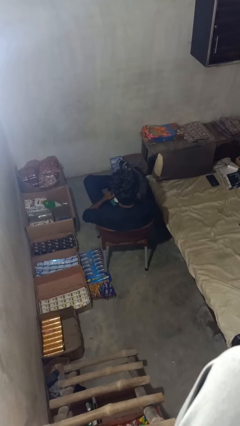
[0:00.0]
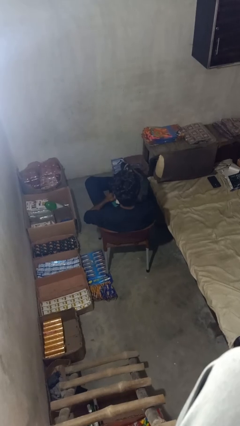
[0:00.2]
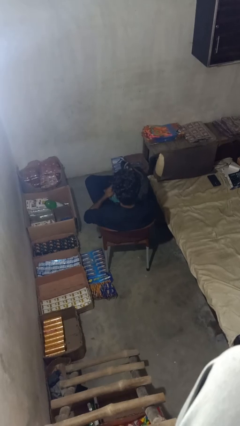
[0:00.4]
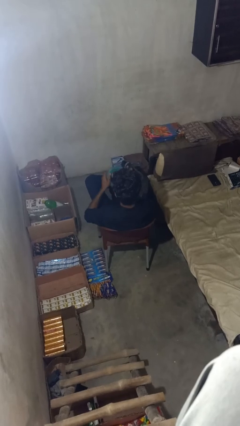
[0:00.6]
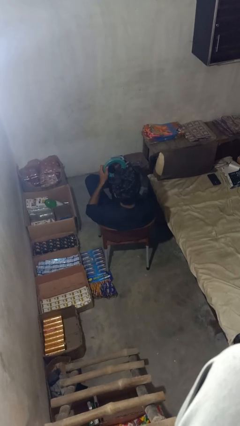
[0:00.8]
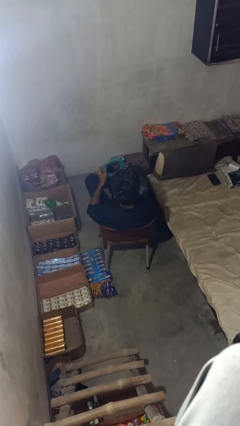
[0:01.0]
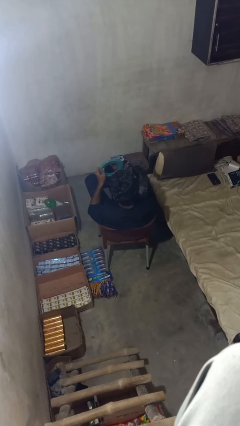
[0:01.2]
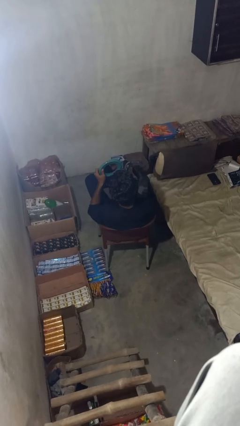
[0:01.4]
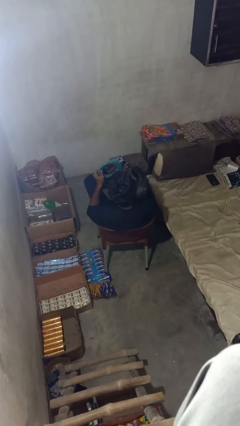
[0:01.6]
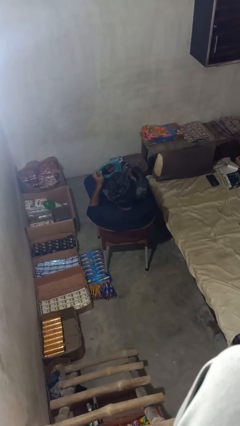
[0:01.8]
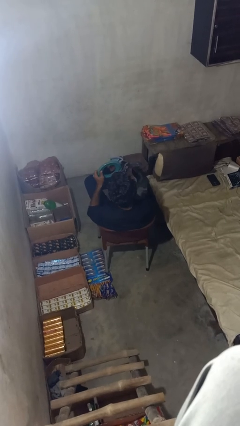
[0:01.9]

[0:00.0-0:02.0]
person applies lip makeup

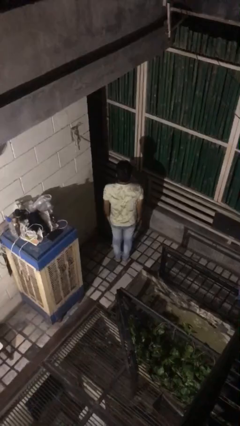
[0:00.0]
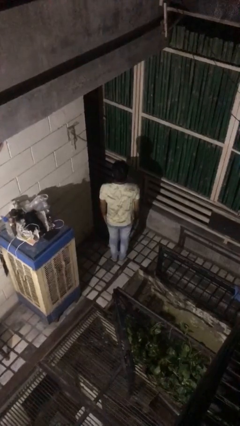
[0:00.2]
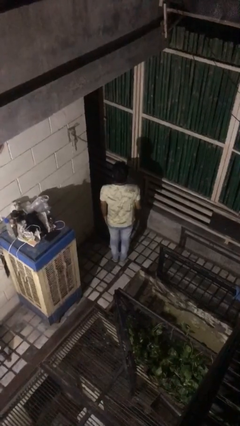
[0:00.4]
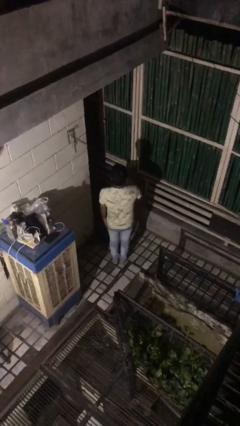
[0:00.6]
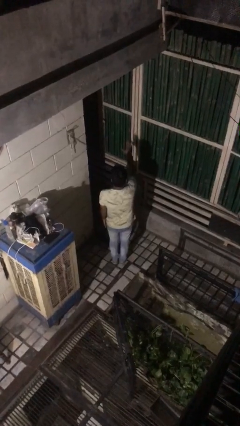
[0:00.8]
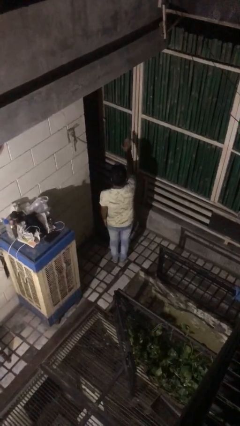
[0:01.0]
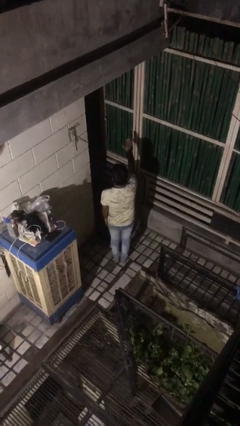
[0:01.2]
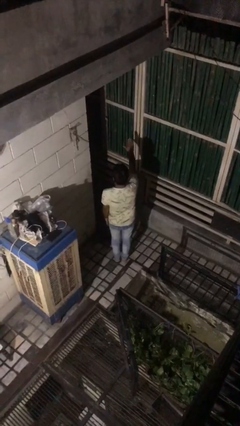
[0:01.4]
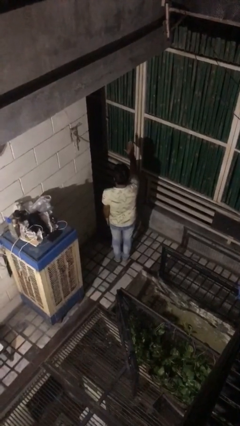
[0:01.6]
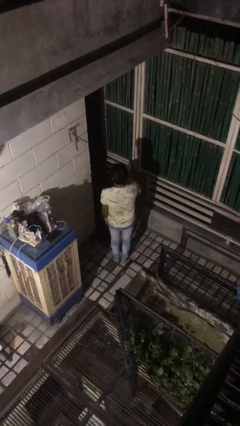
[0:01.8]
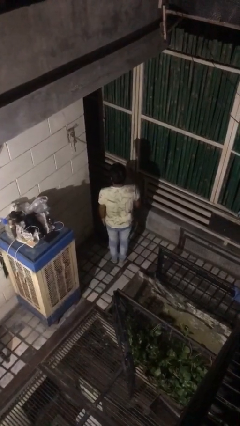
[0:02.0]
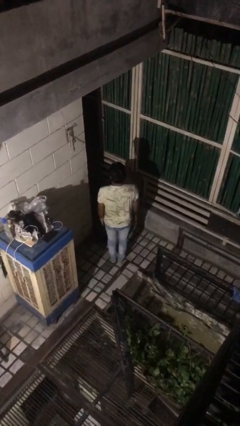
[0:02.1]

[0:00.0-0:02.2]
person gestures stop

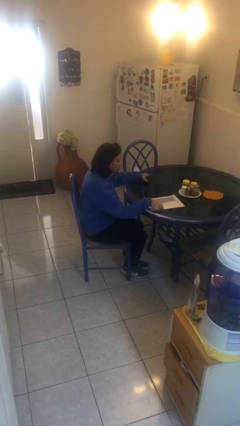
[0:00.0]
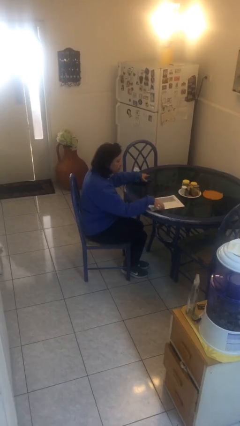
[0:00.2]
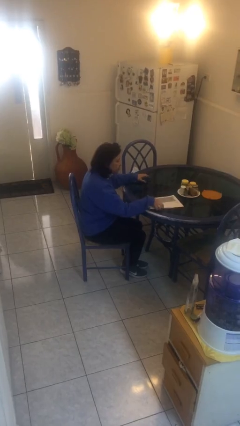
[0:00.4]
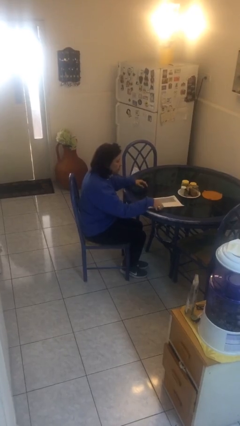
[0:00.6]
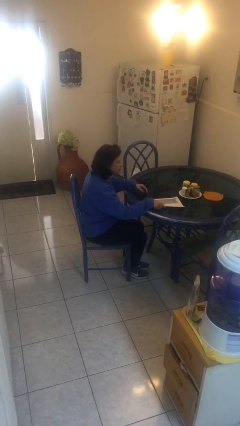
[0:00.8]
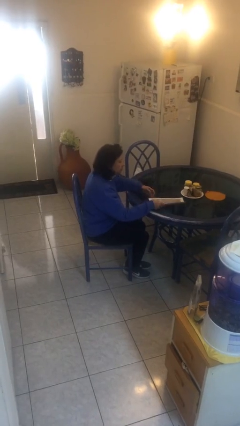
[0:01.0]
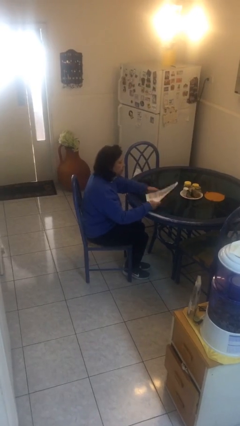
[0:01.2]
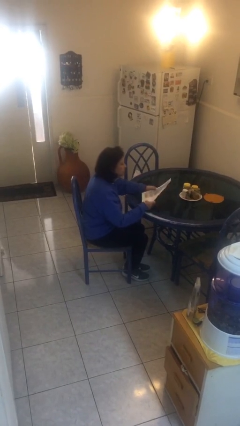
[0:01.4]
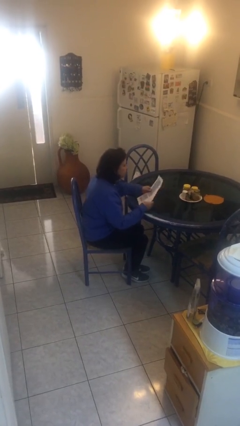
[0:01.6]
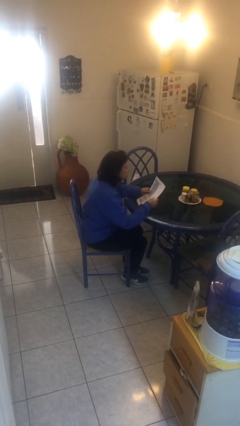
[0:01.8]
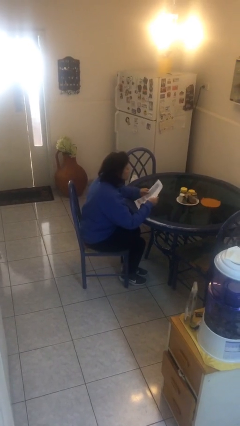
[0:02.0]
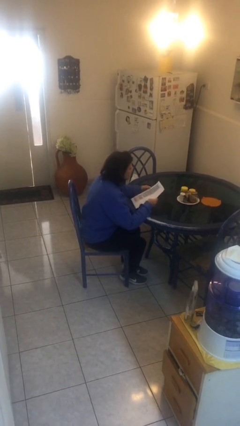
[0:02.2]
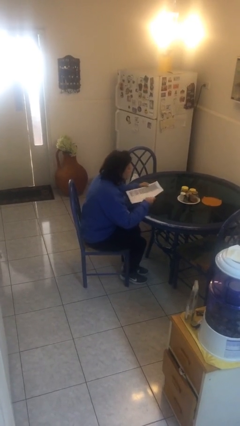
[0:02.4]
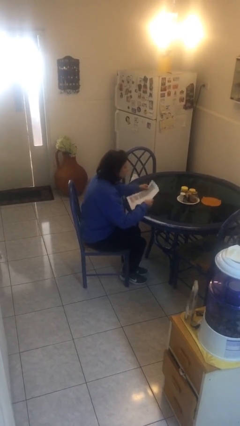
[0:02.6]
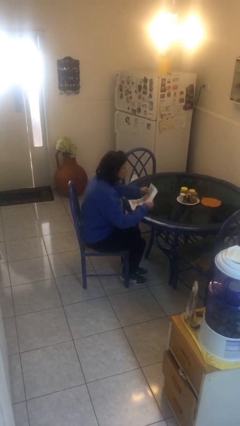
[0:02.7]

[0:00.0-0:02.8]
person picks up object from table

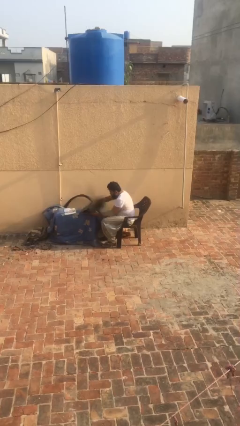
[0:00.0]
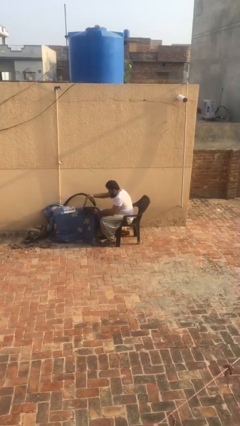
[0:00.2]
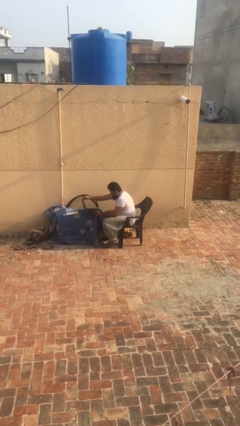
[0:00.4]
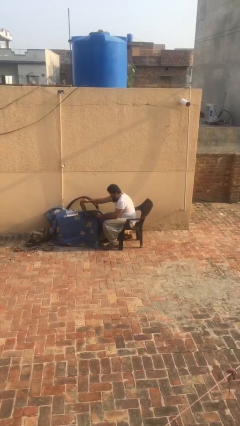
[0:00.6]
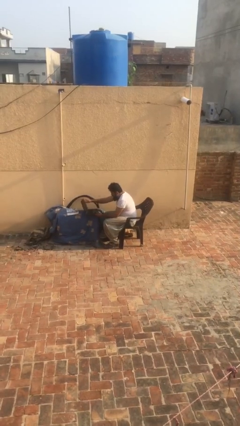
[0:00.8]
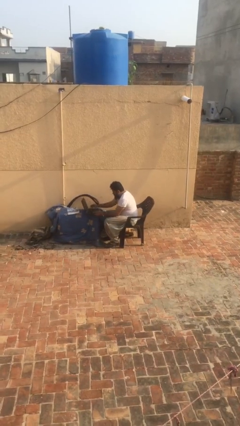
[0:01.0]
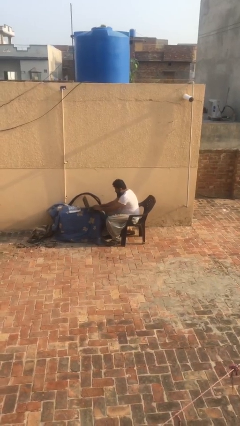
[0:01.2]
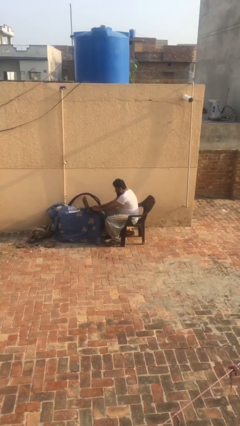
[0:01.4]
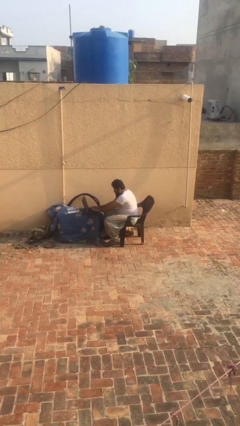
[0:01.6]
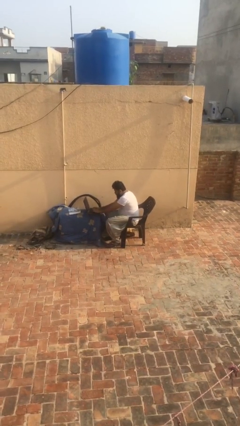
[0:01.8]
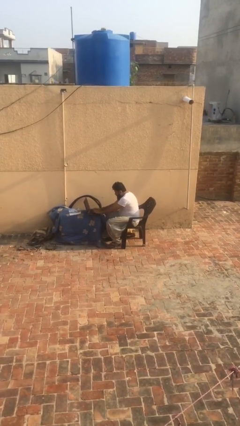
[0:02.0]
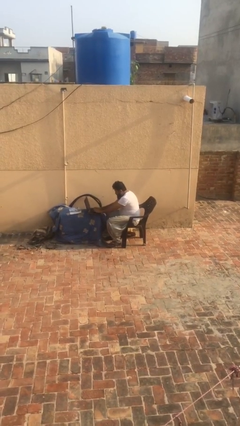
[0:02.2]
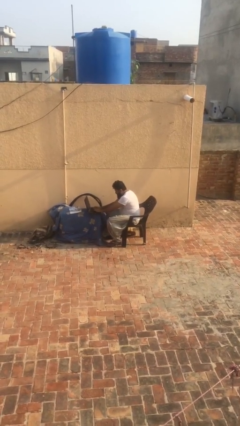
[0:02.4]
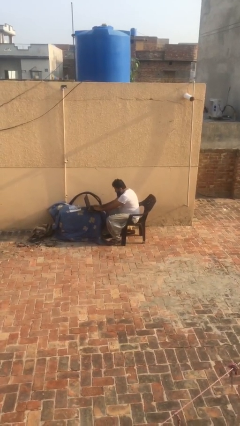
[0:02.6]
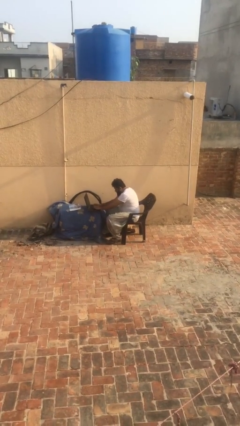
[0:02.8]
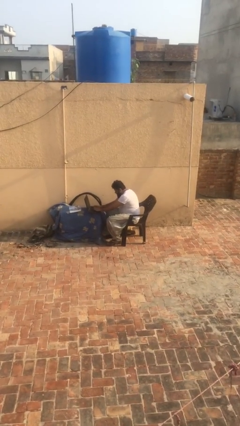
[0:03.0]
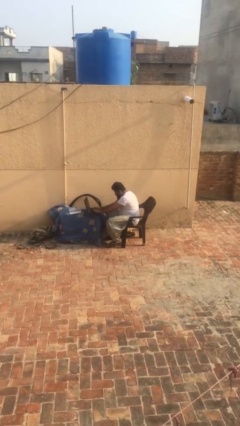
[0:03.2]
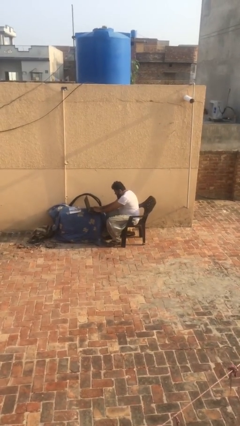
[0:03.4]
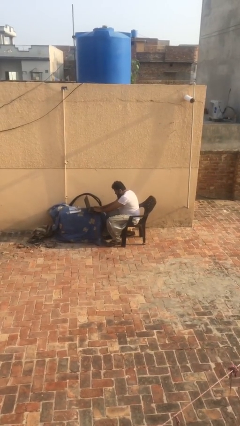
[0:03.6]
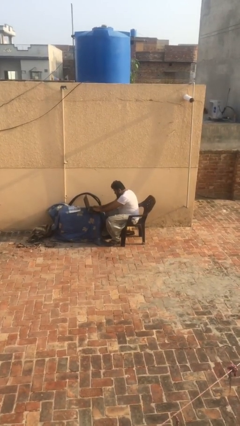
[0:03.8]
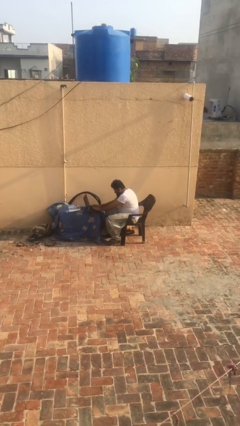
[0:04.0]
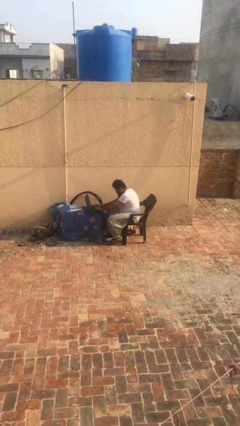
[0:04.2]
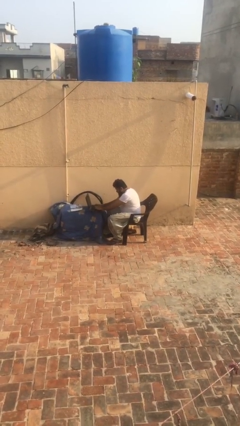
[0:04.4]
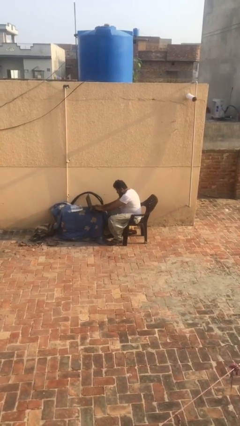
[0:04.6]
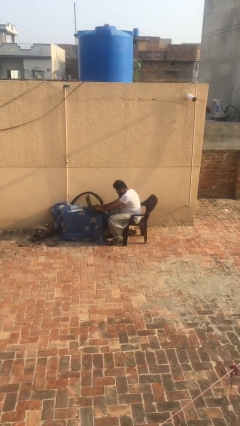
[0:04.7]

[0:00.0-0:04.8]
person interacts with laptop

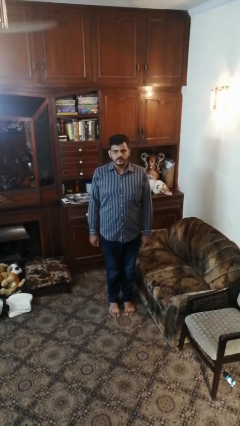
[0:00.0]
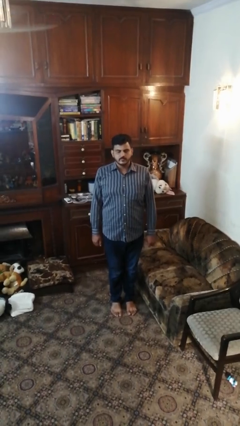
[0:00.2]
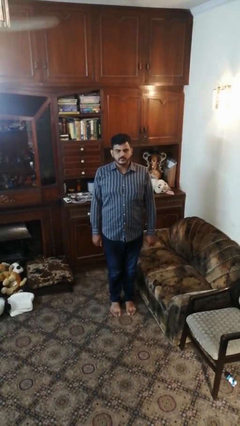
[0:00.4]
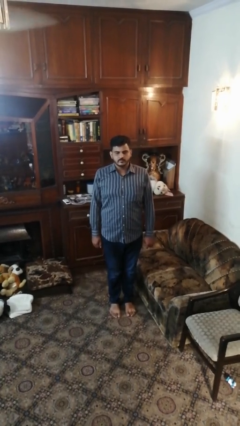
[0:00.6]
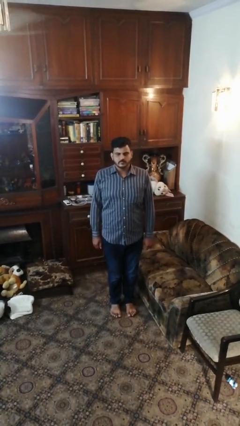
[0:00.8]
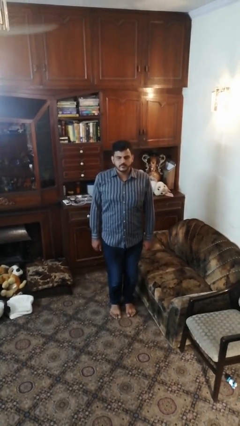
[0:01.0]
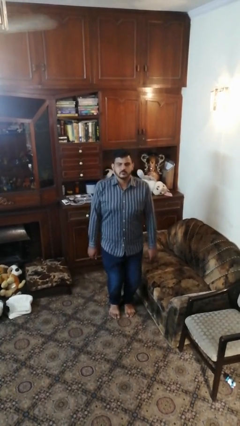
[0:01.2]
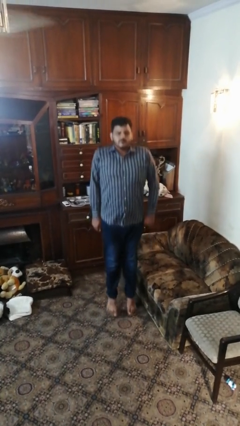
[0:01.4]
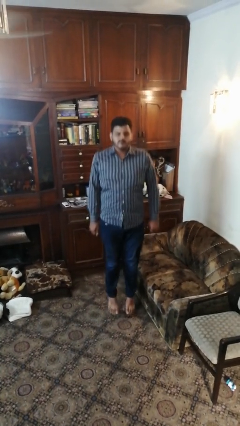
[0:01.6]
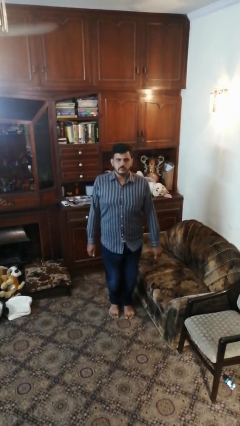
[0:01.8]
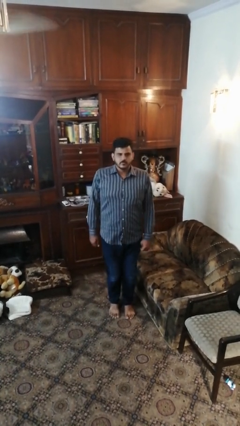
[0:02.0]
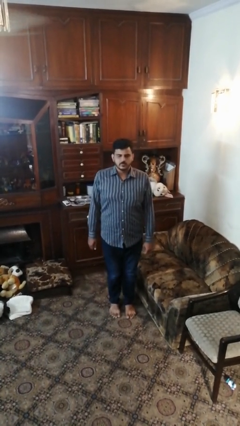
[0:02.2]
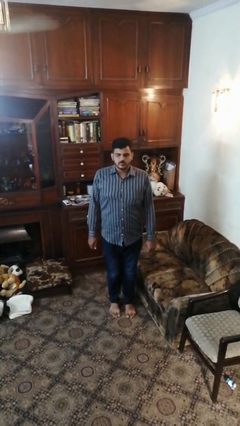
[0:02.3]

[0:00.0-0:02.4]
person jumps

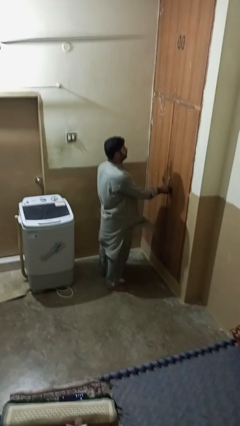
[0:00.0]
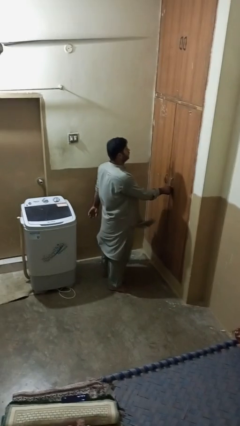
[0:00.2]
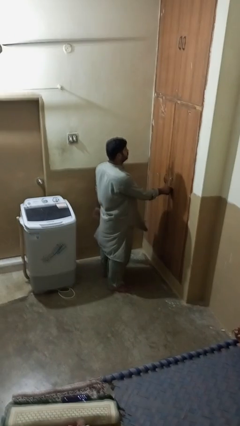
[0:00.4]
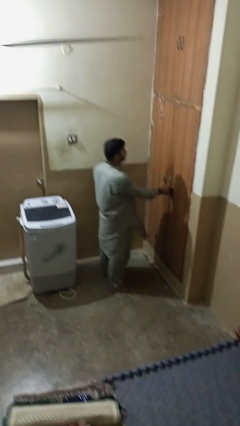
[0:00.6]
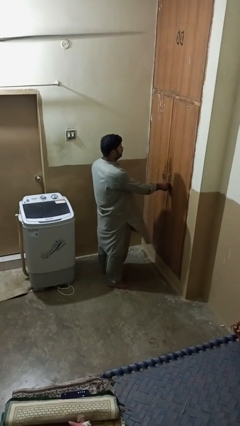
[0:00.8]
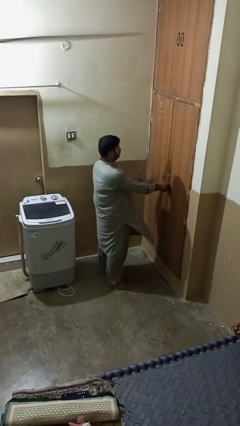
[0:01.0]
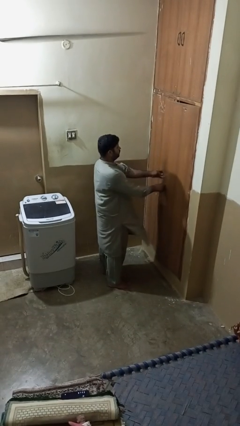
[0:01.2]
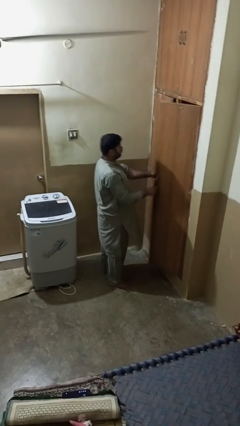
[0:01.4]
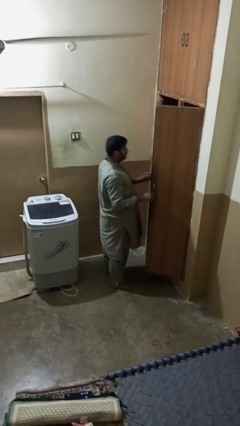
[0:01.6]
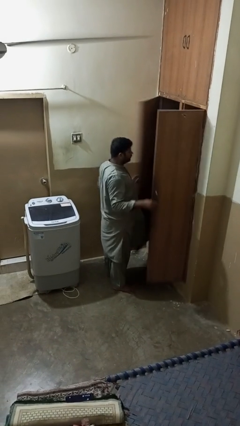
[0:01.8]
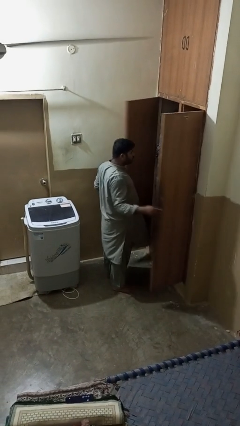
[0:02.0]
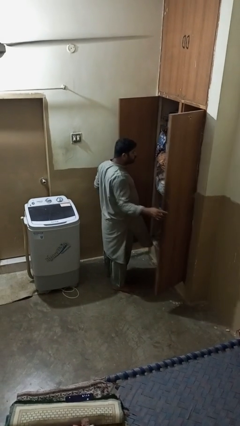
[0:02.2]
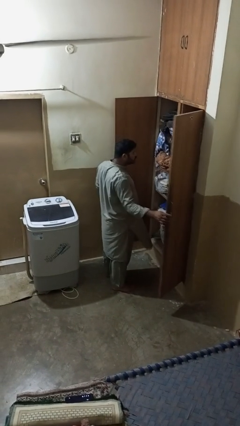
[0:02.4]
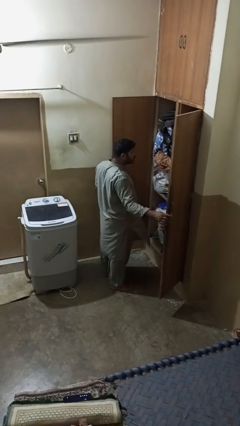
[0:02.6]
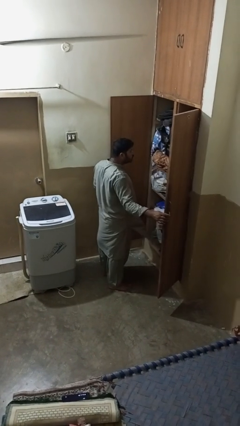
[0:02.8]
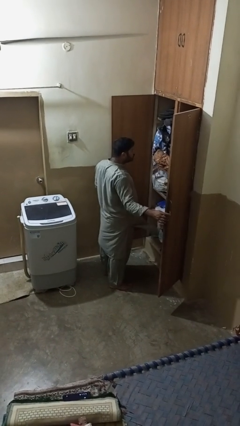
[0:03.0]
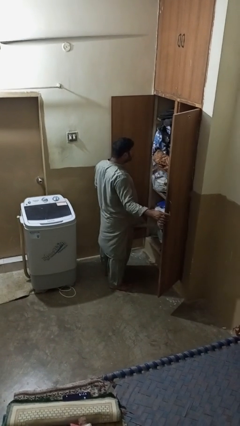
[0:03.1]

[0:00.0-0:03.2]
person opens closet door

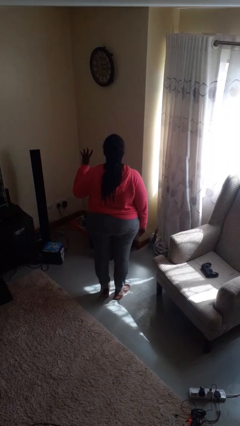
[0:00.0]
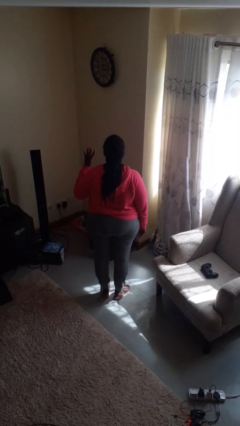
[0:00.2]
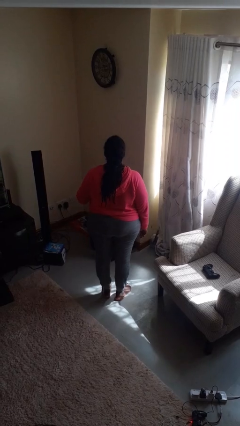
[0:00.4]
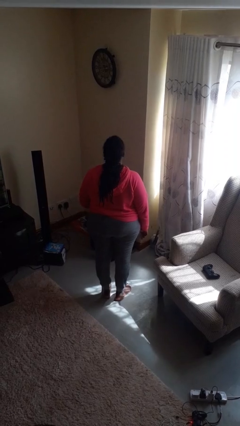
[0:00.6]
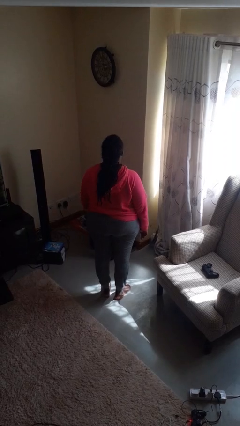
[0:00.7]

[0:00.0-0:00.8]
person gestures number four
